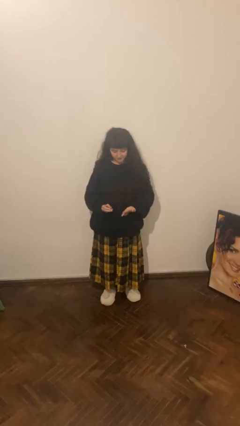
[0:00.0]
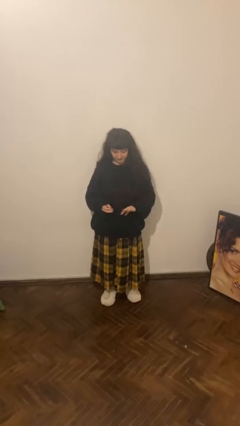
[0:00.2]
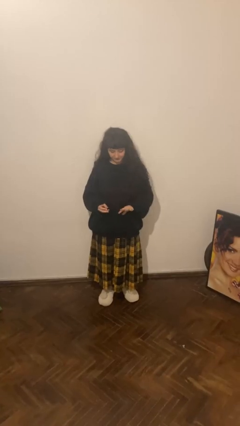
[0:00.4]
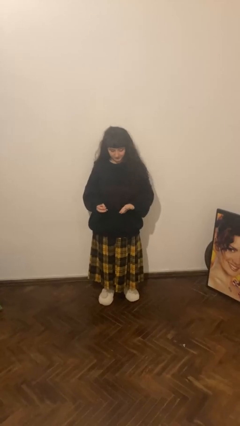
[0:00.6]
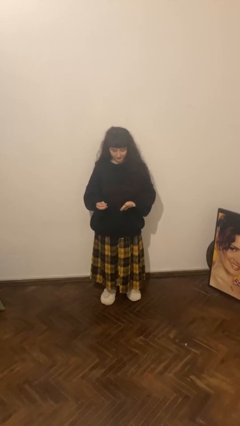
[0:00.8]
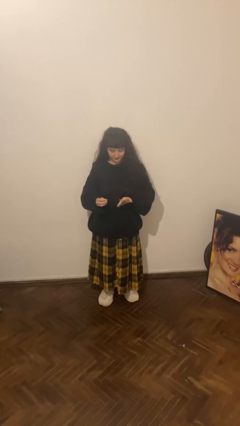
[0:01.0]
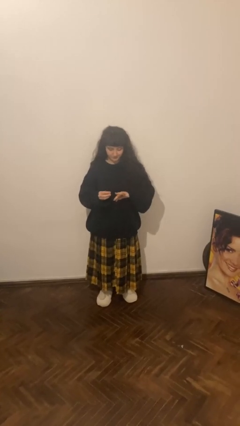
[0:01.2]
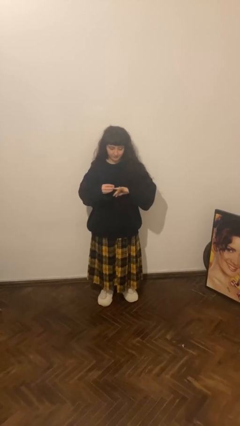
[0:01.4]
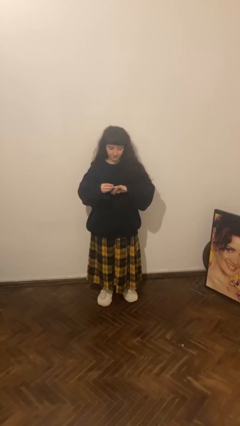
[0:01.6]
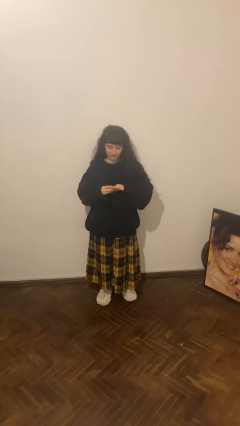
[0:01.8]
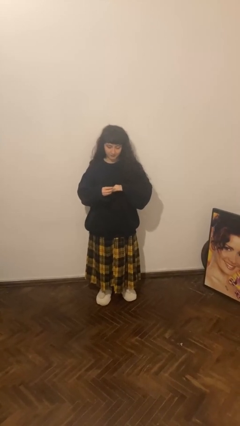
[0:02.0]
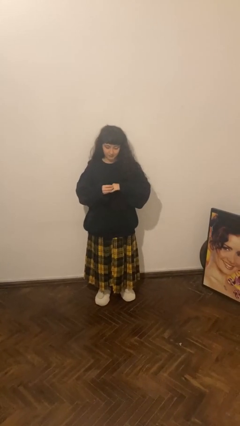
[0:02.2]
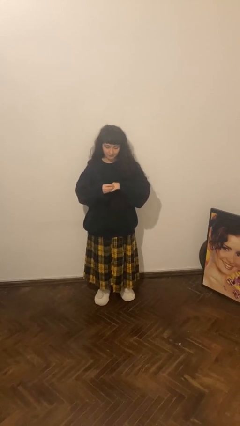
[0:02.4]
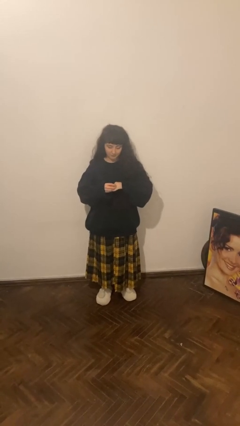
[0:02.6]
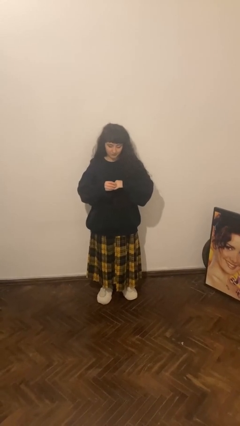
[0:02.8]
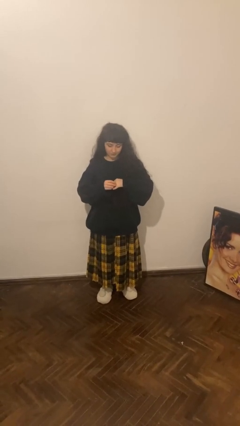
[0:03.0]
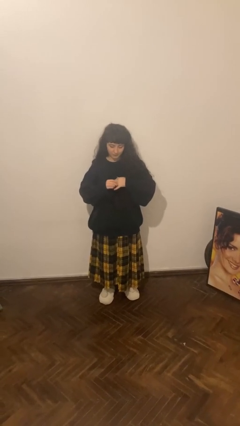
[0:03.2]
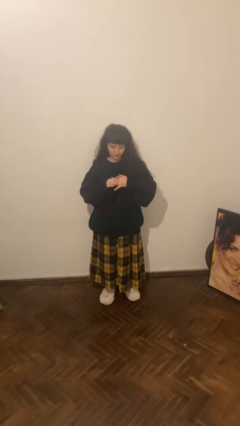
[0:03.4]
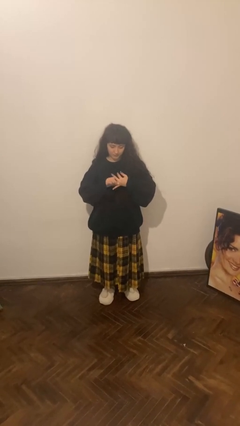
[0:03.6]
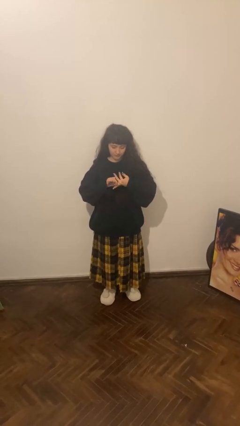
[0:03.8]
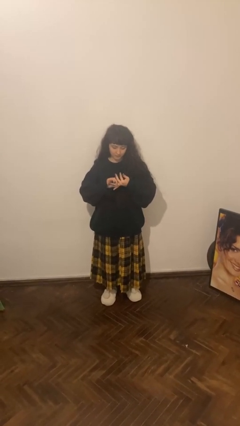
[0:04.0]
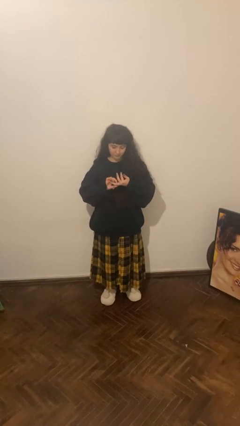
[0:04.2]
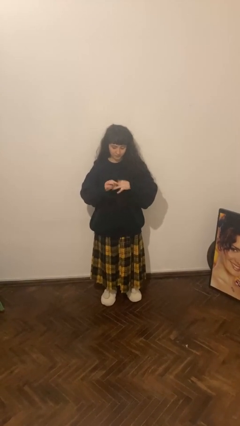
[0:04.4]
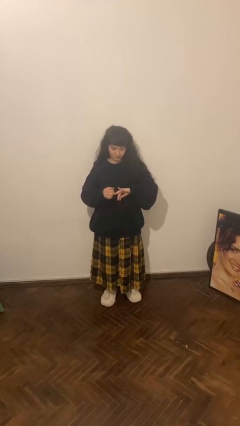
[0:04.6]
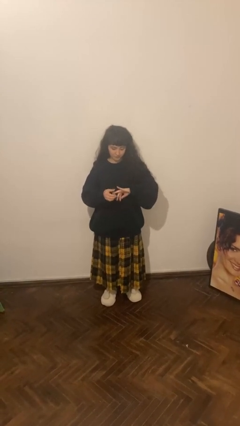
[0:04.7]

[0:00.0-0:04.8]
person puts on ring

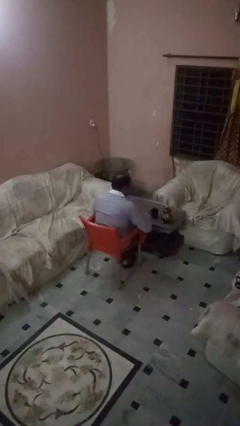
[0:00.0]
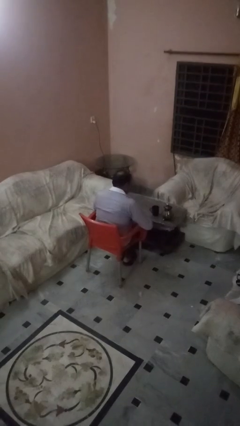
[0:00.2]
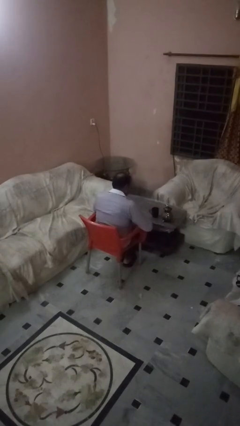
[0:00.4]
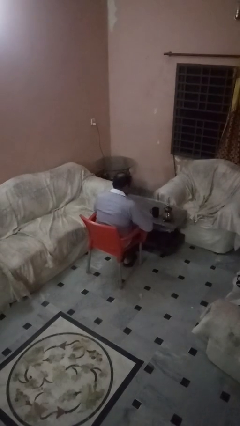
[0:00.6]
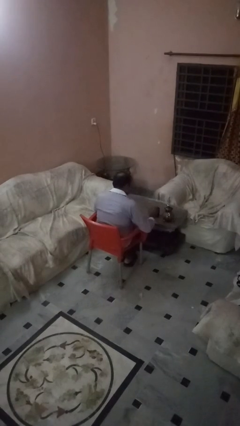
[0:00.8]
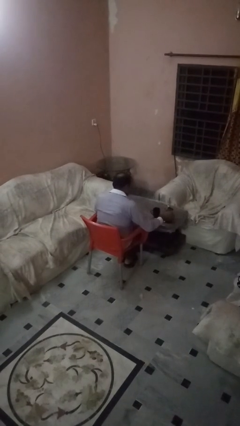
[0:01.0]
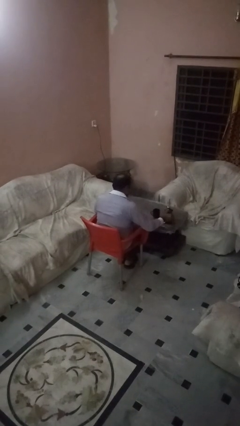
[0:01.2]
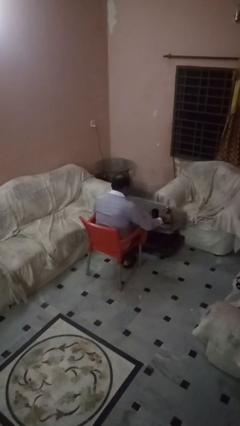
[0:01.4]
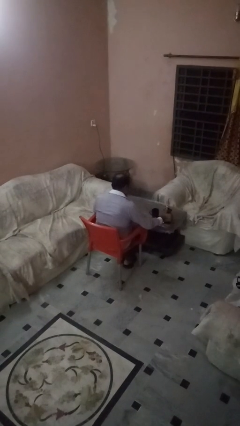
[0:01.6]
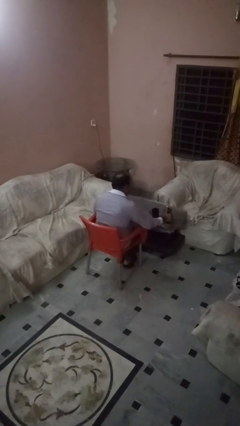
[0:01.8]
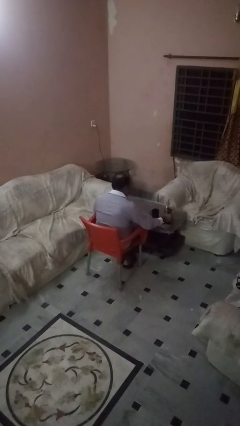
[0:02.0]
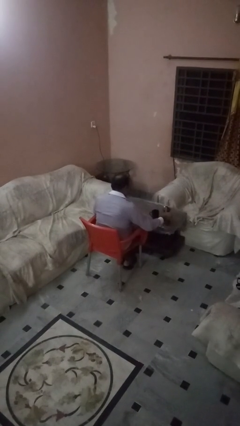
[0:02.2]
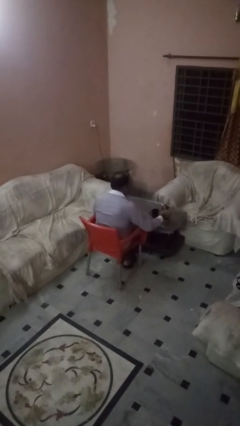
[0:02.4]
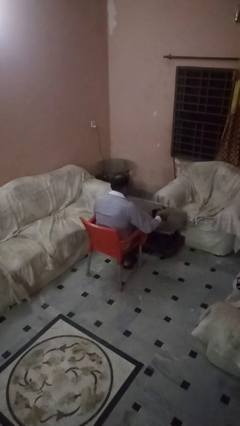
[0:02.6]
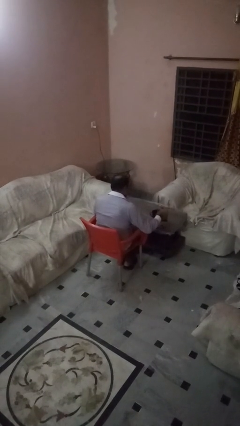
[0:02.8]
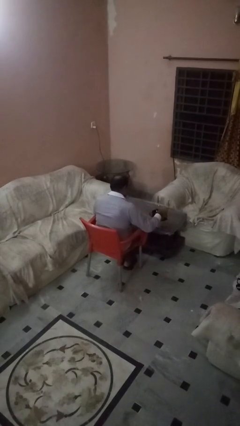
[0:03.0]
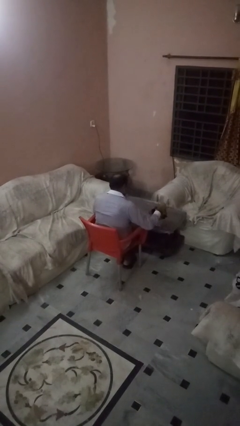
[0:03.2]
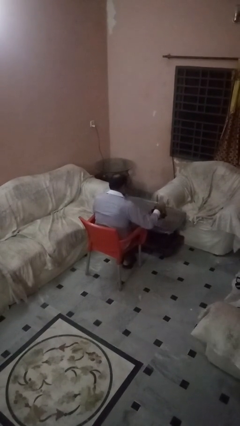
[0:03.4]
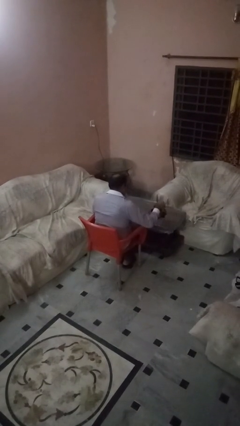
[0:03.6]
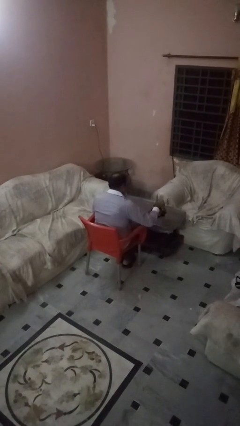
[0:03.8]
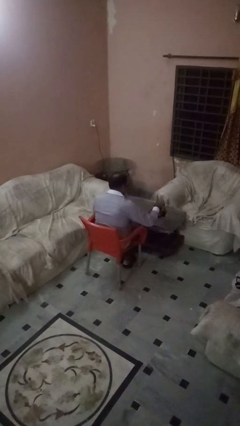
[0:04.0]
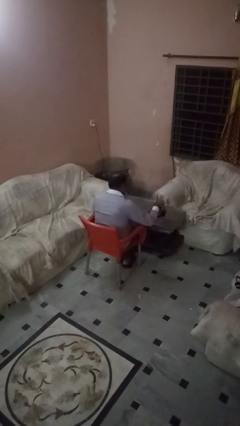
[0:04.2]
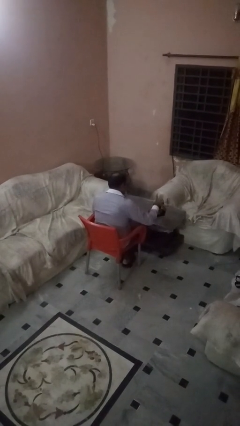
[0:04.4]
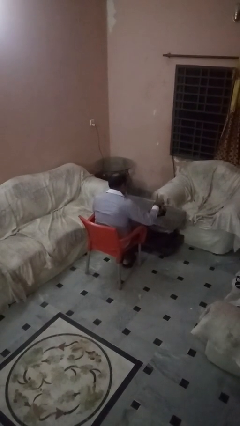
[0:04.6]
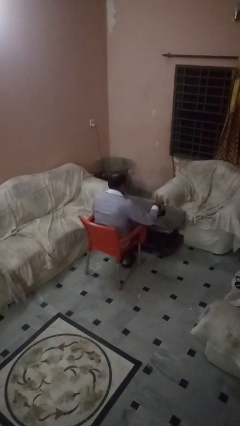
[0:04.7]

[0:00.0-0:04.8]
person pours coffee into mug

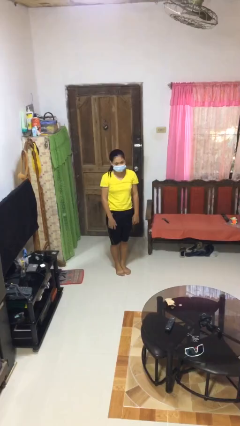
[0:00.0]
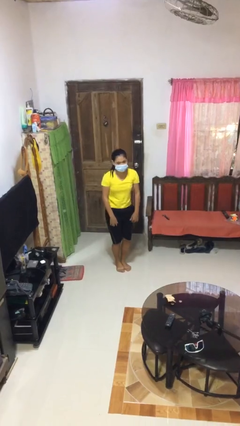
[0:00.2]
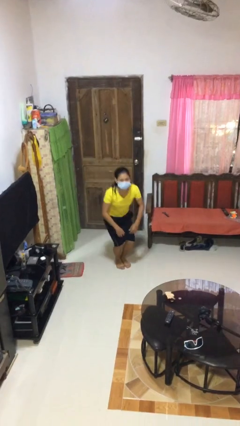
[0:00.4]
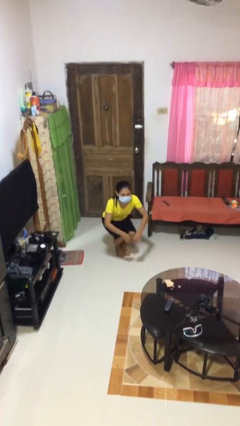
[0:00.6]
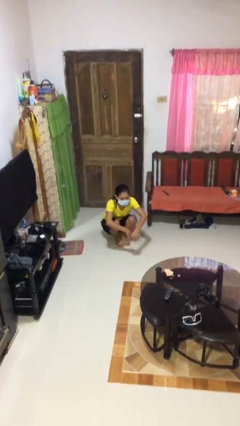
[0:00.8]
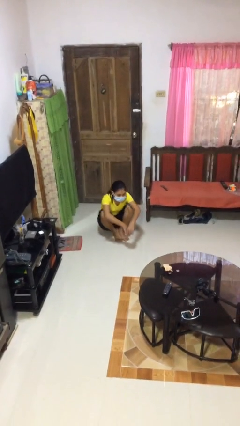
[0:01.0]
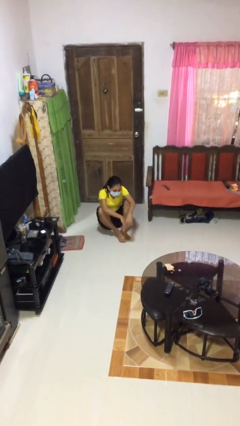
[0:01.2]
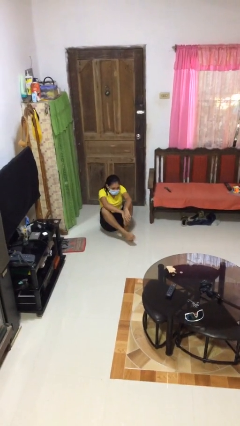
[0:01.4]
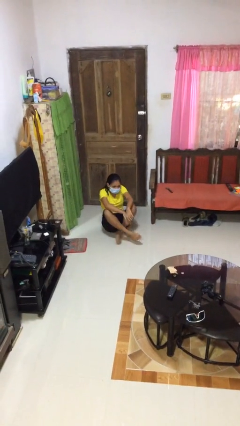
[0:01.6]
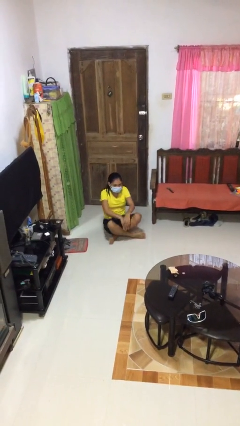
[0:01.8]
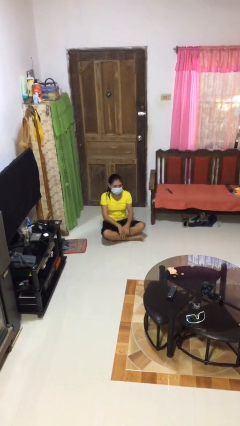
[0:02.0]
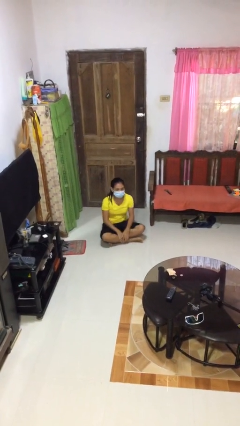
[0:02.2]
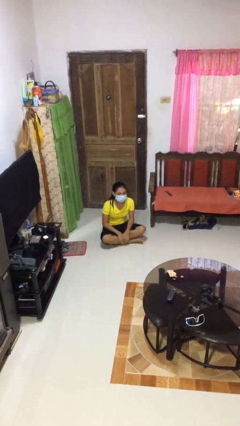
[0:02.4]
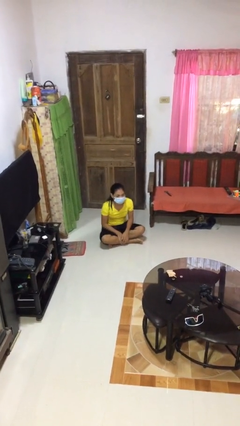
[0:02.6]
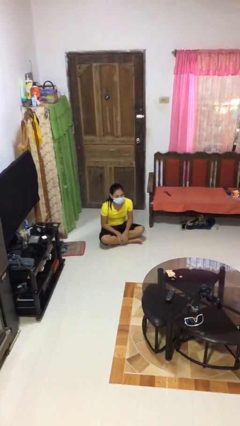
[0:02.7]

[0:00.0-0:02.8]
person sits crisscross

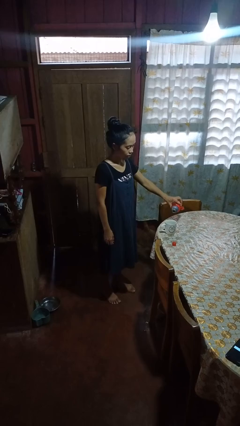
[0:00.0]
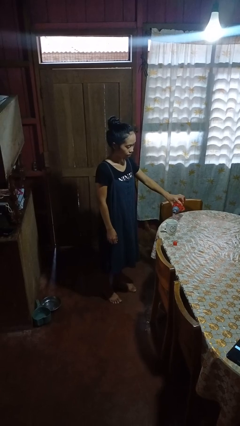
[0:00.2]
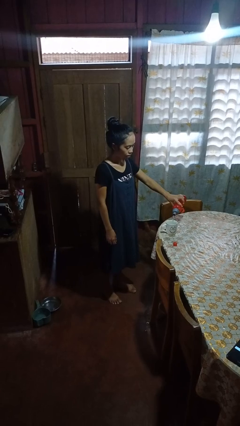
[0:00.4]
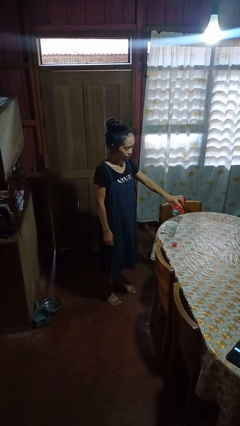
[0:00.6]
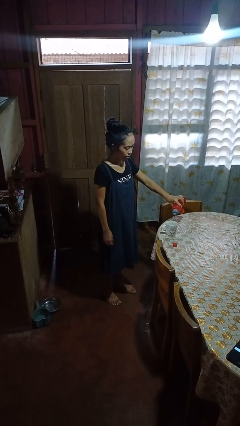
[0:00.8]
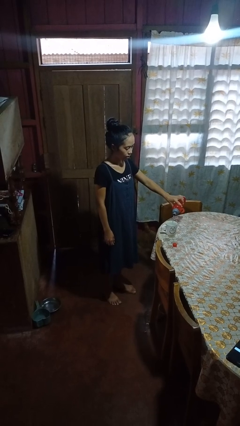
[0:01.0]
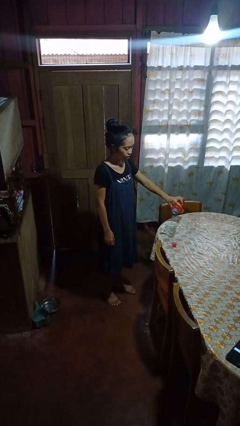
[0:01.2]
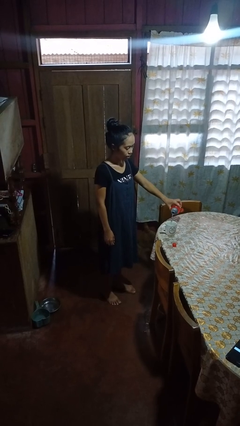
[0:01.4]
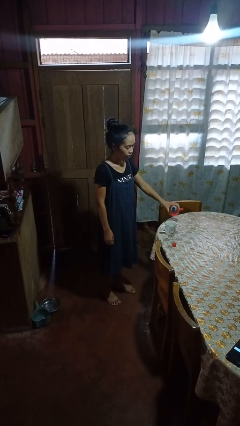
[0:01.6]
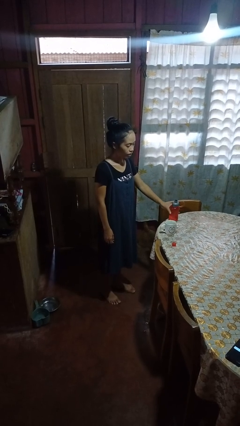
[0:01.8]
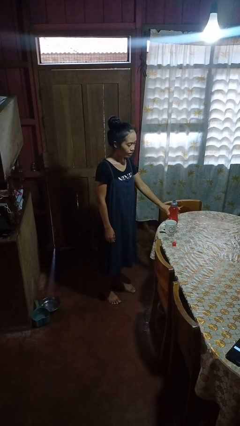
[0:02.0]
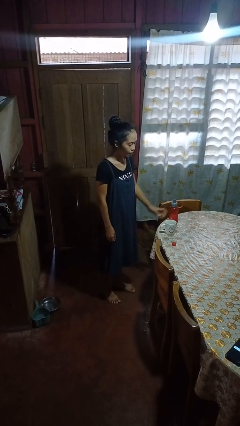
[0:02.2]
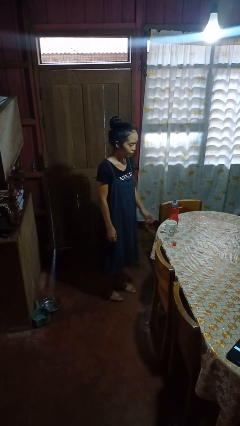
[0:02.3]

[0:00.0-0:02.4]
person pours liquid into cup

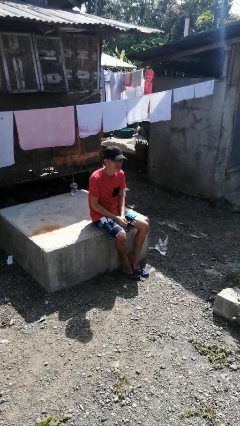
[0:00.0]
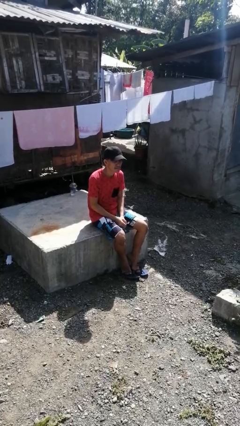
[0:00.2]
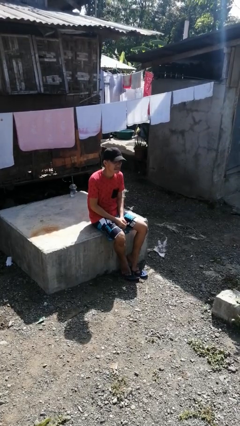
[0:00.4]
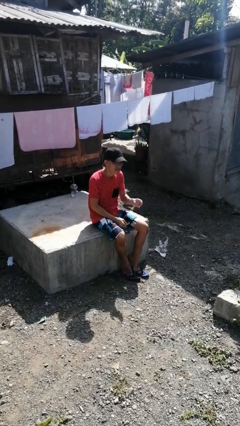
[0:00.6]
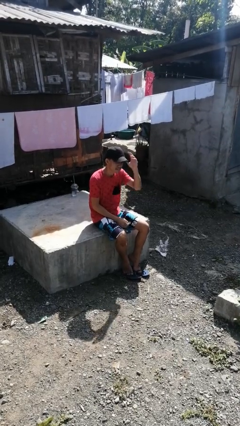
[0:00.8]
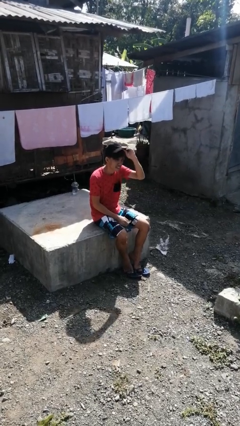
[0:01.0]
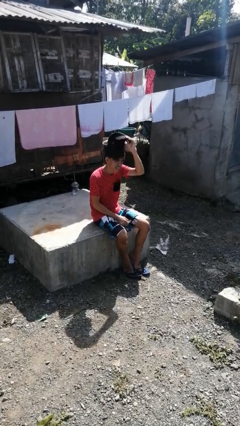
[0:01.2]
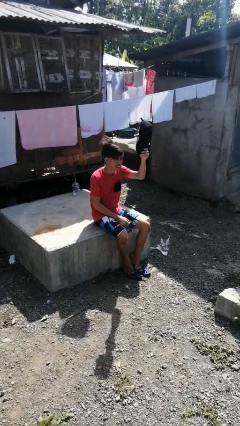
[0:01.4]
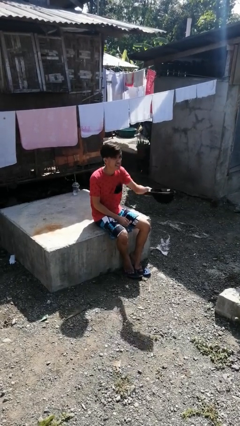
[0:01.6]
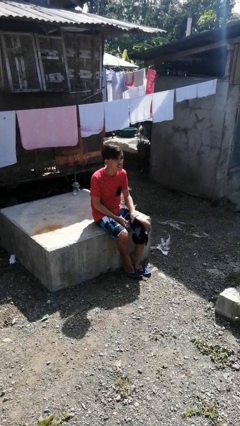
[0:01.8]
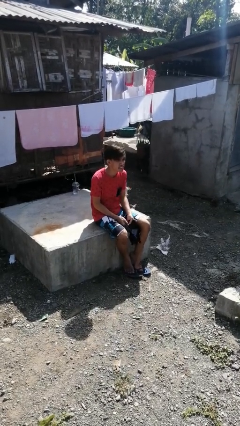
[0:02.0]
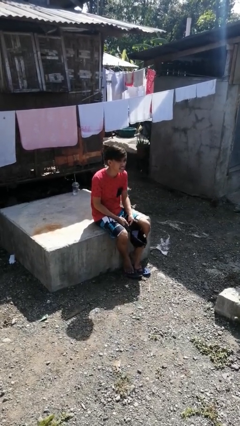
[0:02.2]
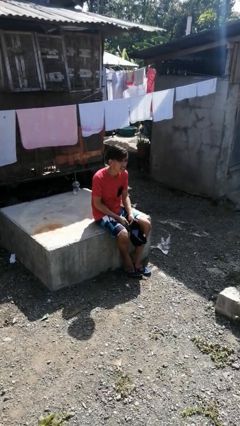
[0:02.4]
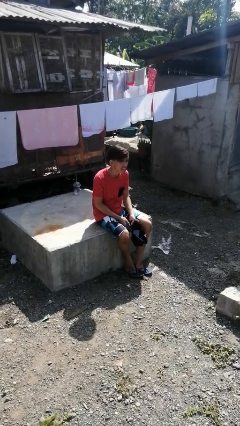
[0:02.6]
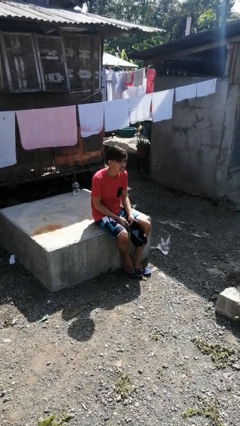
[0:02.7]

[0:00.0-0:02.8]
person takes off hat
